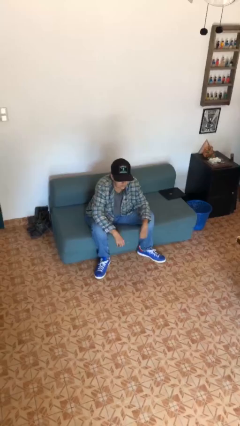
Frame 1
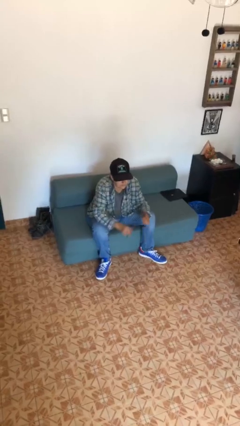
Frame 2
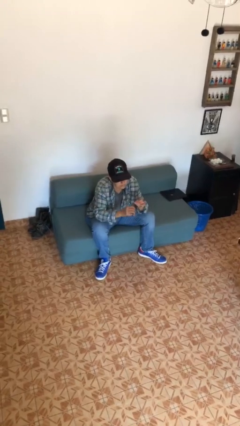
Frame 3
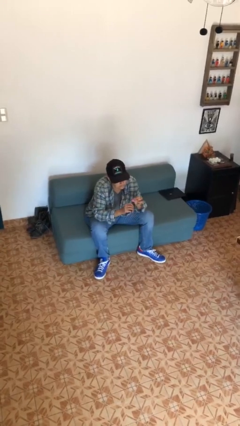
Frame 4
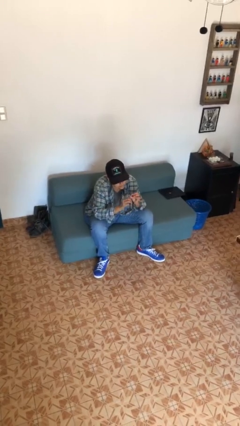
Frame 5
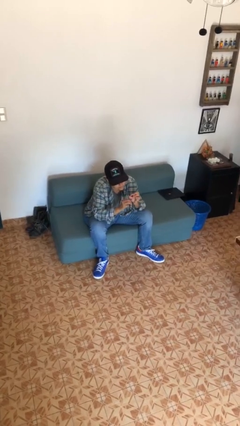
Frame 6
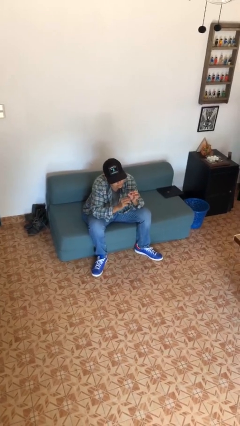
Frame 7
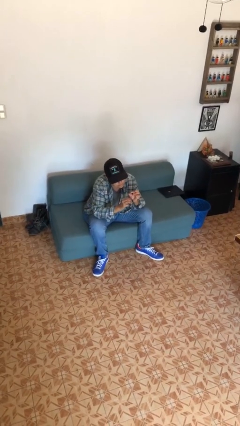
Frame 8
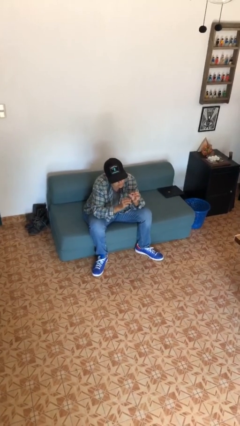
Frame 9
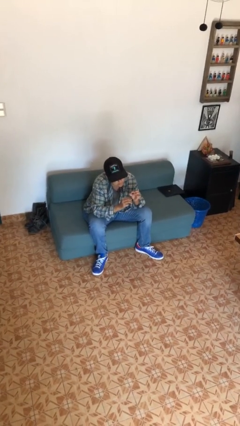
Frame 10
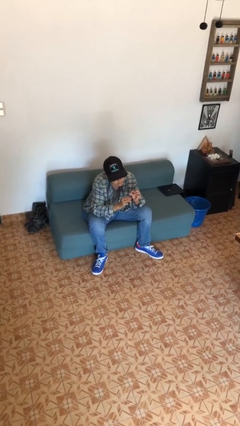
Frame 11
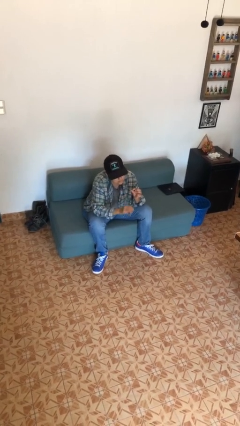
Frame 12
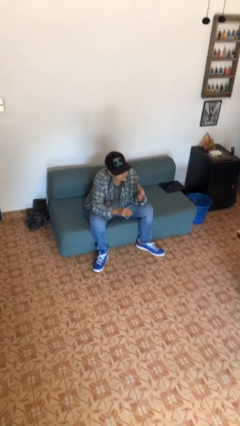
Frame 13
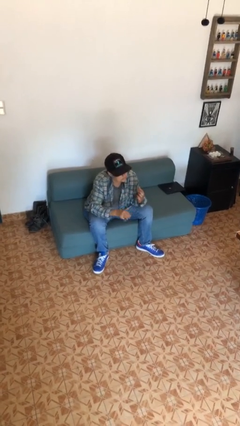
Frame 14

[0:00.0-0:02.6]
person files fingernails

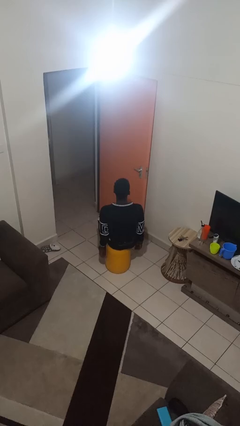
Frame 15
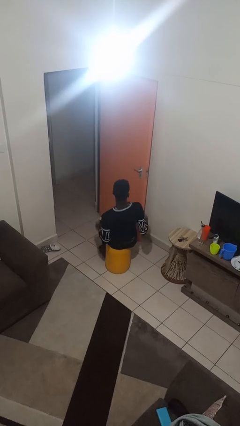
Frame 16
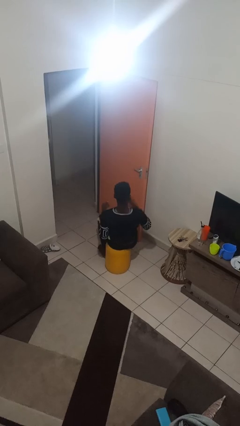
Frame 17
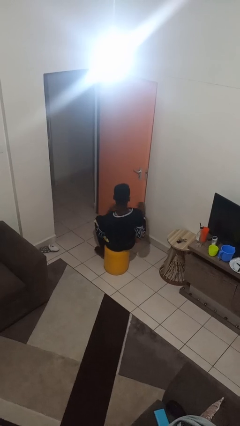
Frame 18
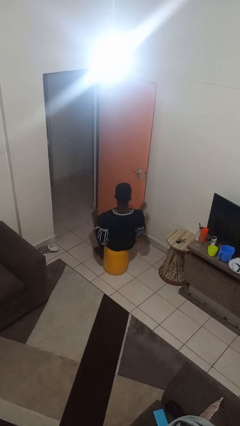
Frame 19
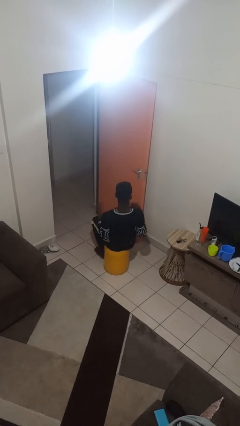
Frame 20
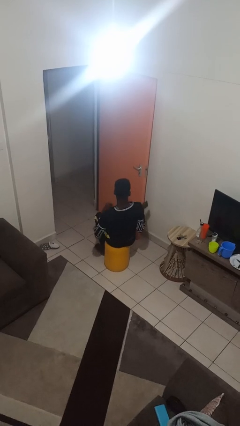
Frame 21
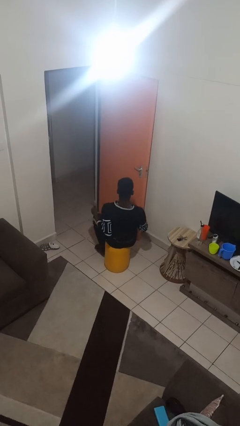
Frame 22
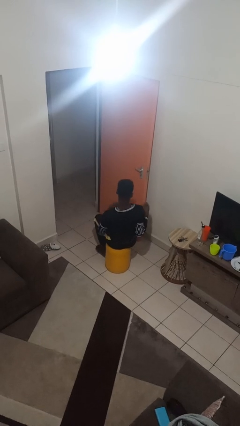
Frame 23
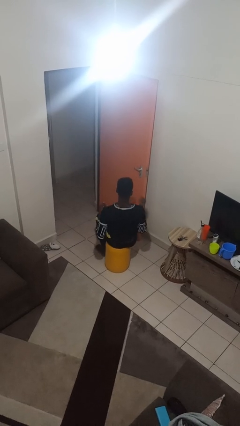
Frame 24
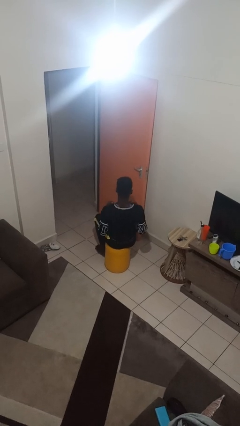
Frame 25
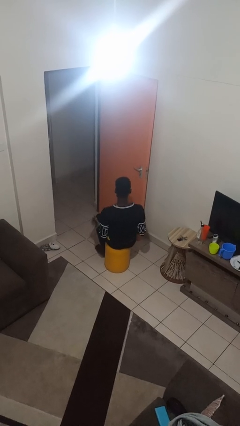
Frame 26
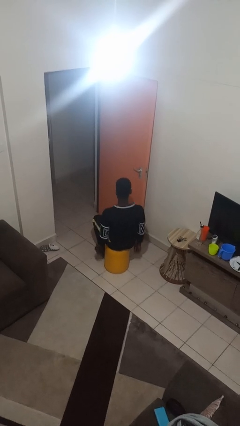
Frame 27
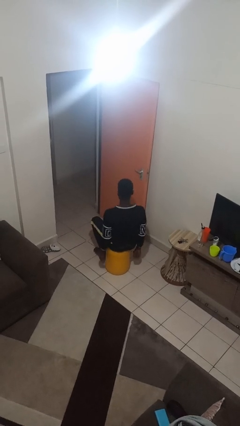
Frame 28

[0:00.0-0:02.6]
person drums on chest

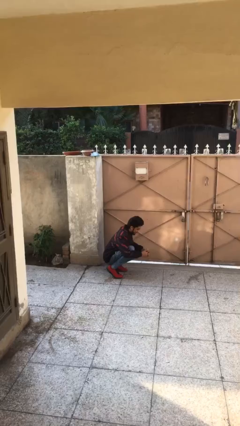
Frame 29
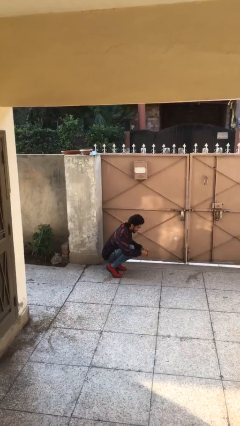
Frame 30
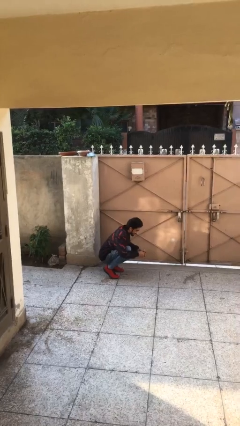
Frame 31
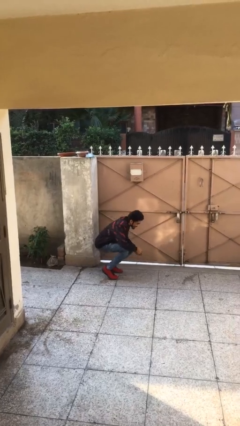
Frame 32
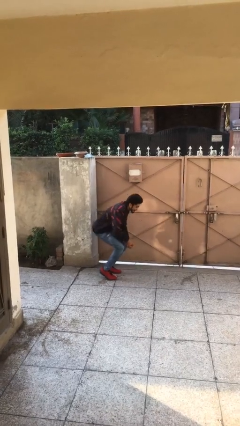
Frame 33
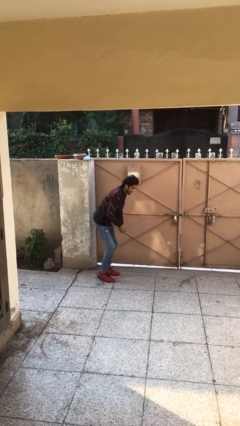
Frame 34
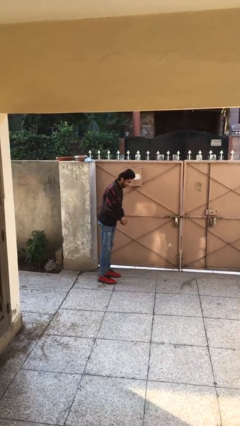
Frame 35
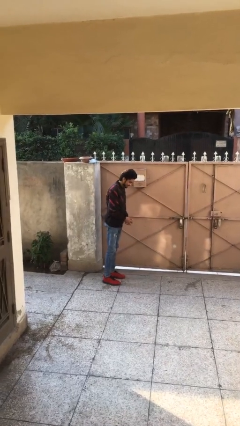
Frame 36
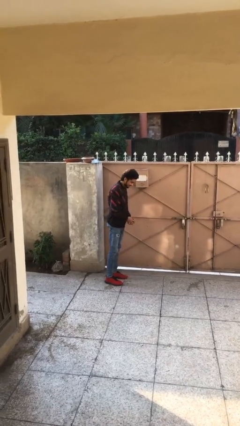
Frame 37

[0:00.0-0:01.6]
person stands up

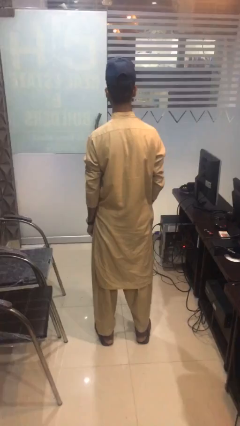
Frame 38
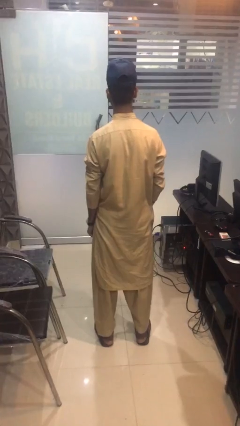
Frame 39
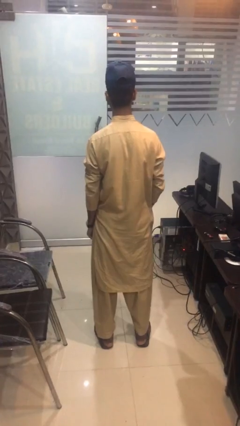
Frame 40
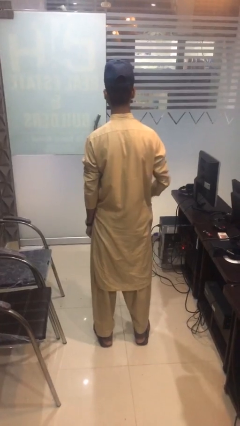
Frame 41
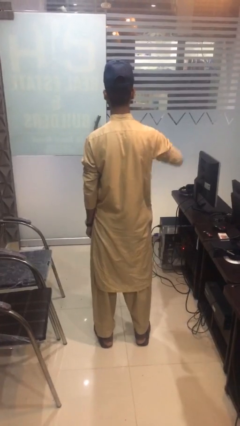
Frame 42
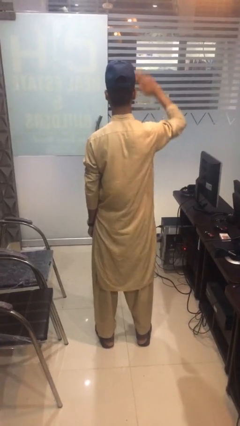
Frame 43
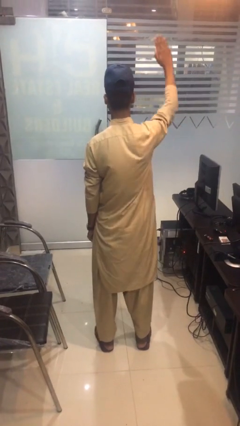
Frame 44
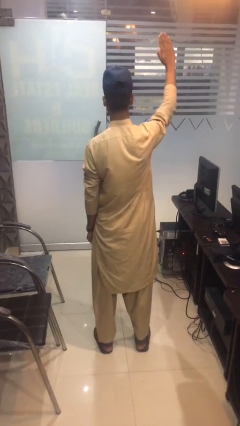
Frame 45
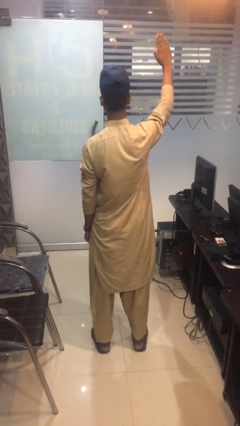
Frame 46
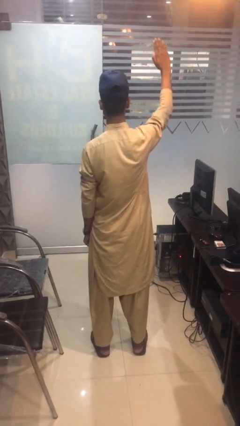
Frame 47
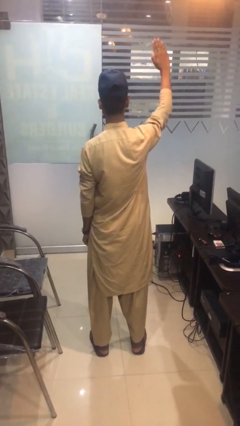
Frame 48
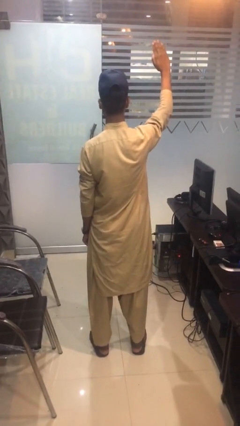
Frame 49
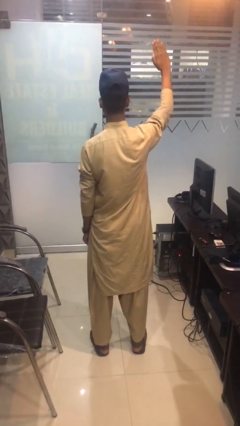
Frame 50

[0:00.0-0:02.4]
person gestures swipe up

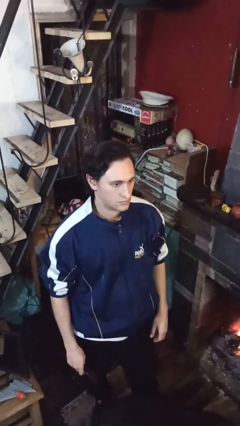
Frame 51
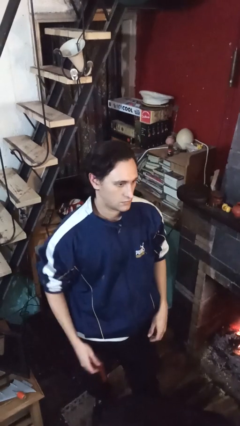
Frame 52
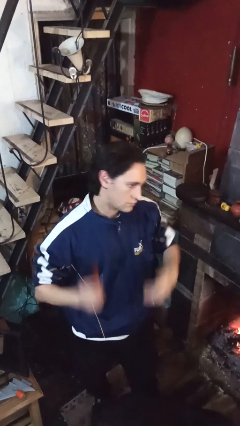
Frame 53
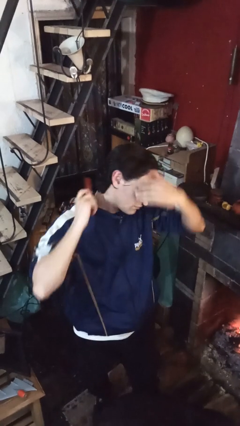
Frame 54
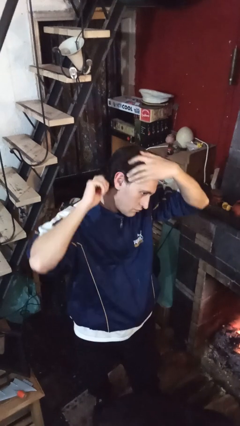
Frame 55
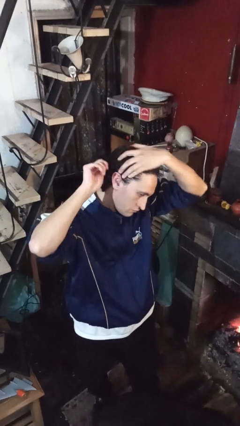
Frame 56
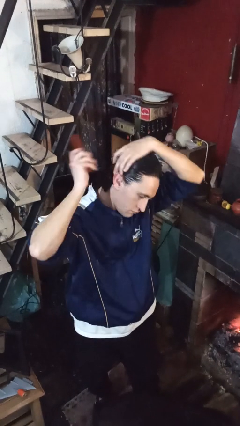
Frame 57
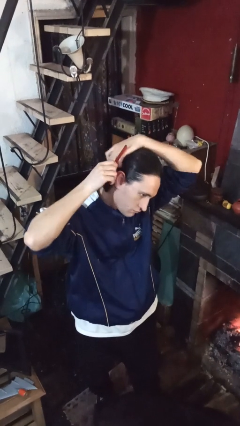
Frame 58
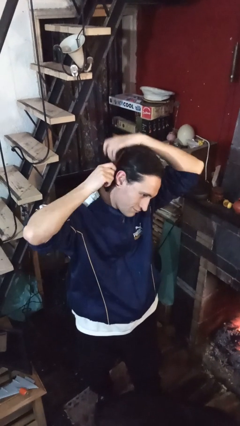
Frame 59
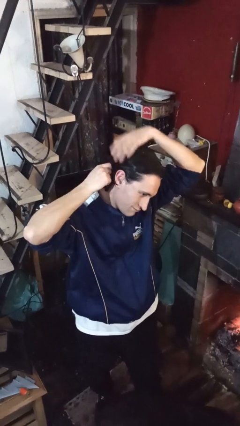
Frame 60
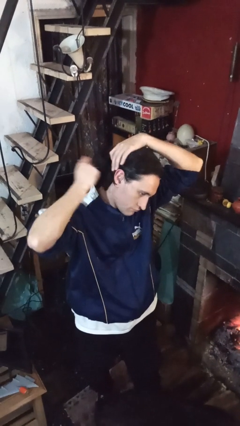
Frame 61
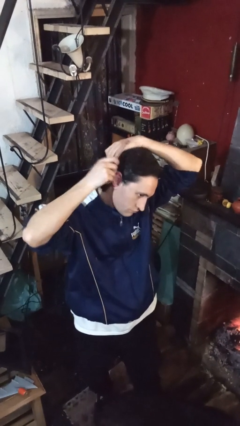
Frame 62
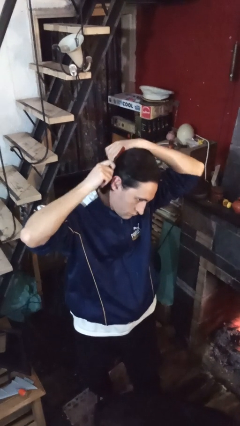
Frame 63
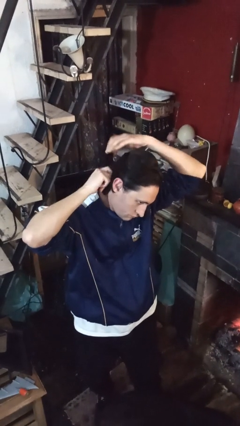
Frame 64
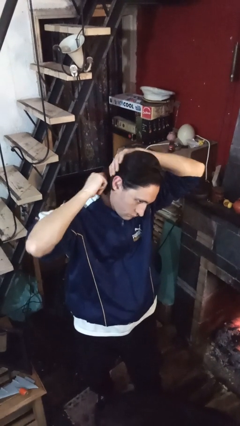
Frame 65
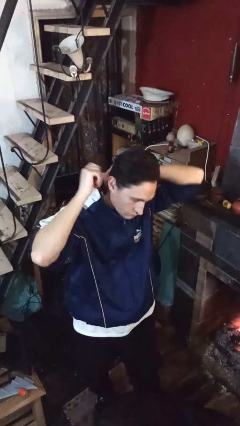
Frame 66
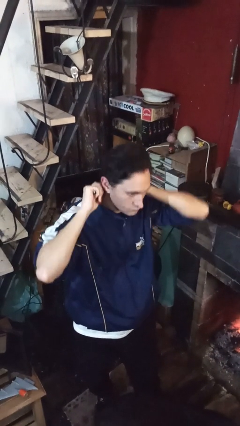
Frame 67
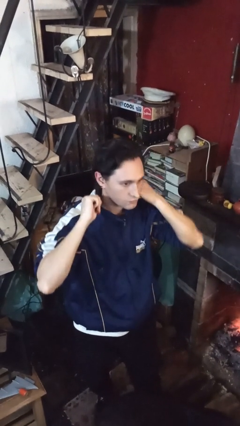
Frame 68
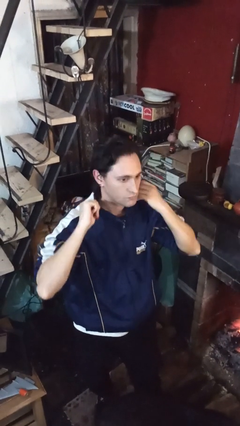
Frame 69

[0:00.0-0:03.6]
person brushes hair

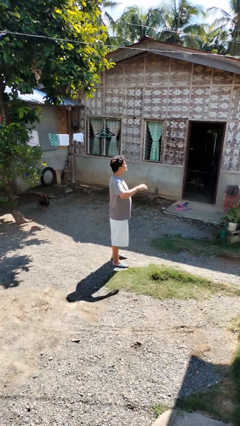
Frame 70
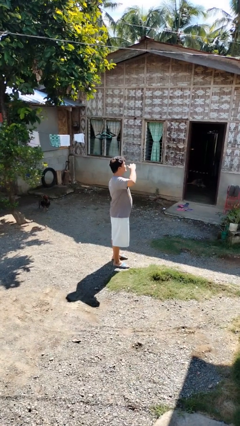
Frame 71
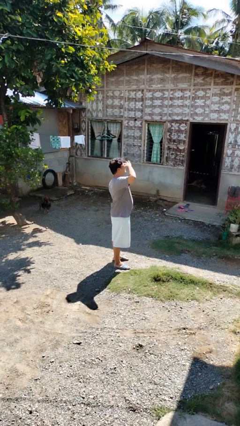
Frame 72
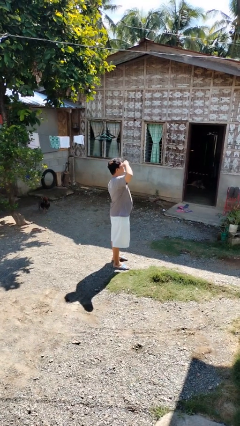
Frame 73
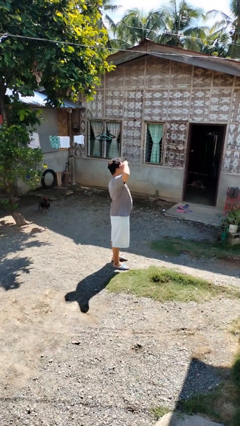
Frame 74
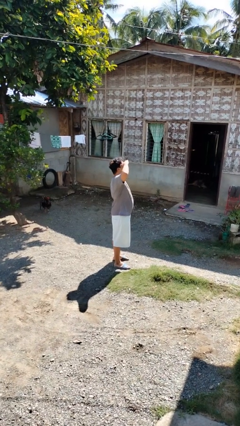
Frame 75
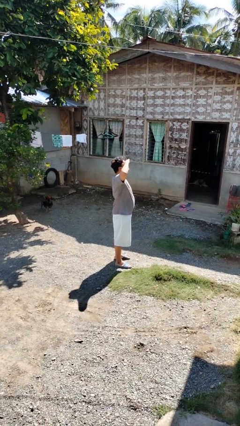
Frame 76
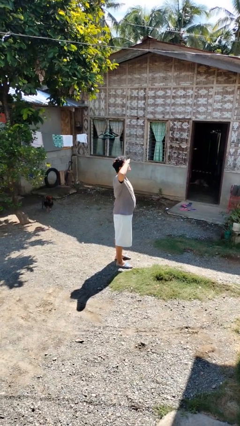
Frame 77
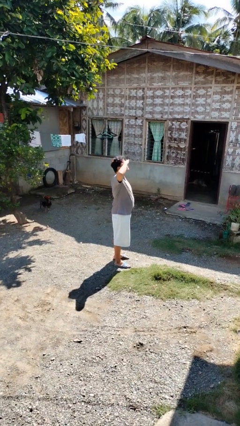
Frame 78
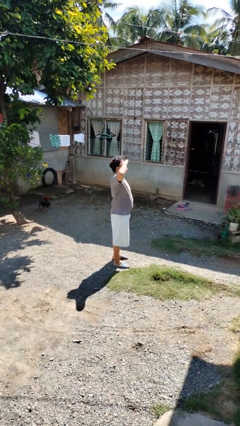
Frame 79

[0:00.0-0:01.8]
person shades eyes

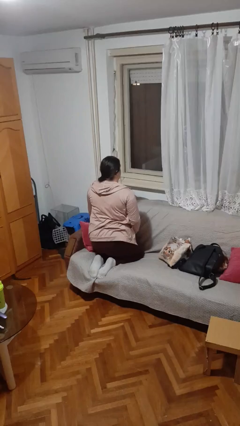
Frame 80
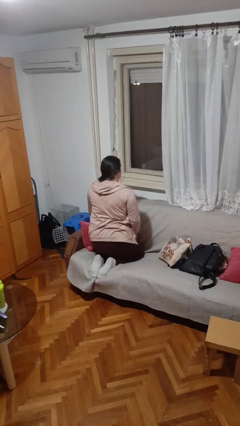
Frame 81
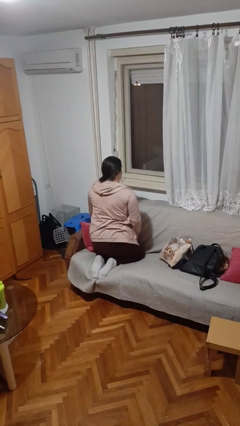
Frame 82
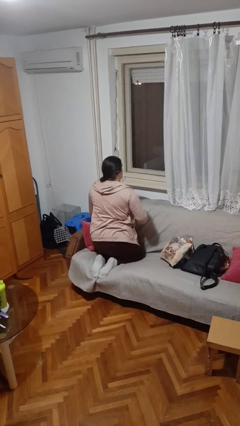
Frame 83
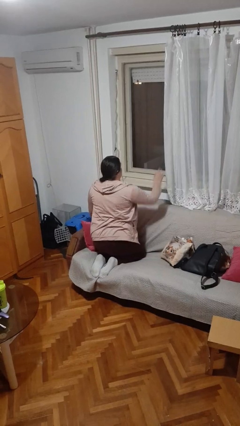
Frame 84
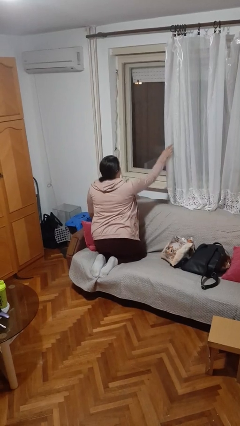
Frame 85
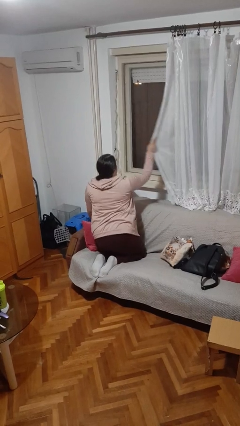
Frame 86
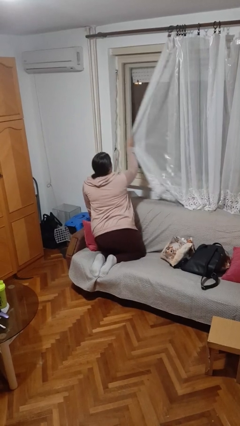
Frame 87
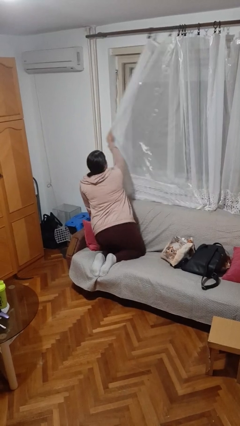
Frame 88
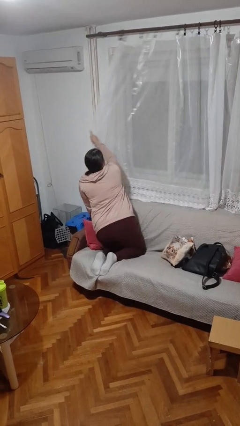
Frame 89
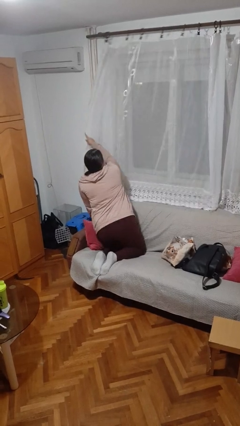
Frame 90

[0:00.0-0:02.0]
person closes curtains
